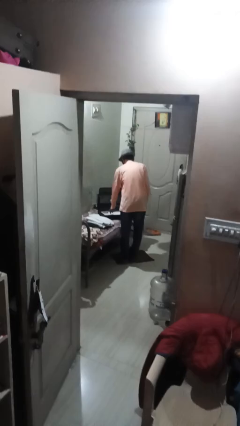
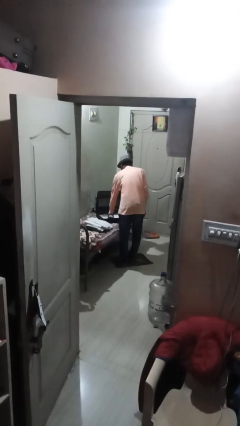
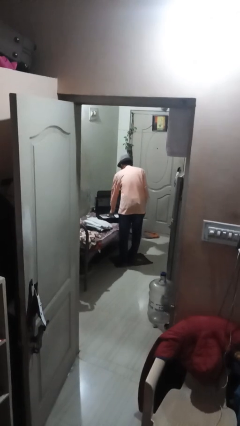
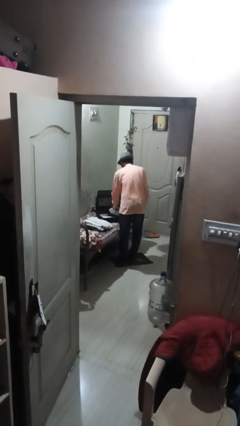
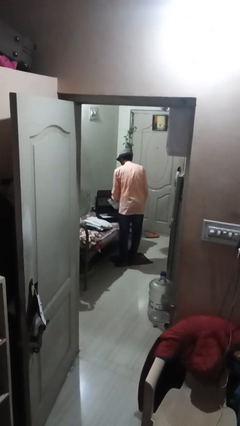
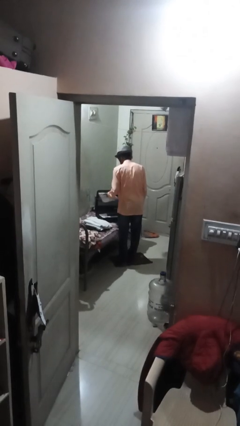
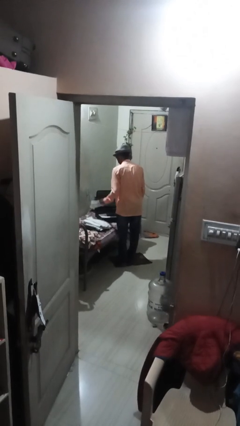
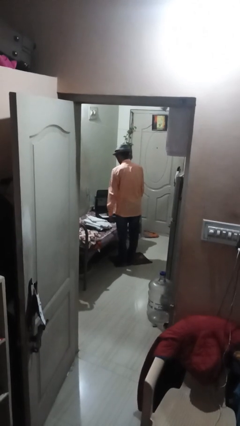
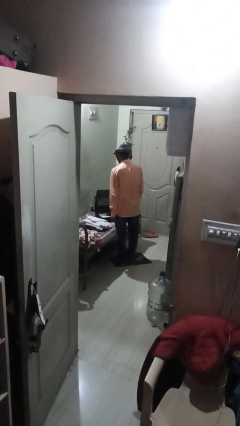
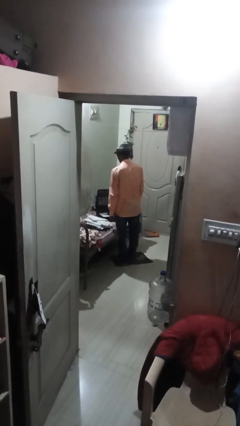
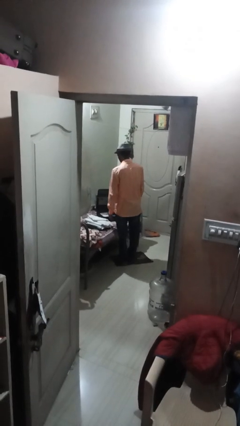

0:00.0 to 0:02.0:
person unloads clothes from suitcase

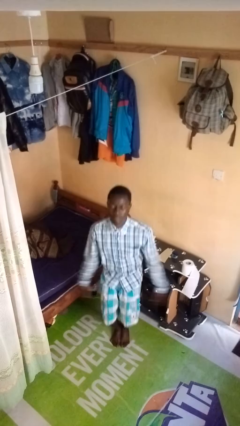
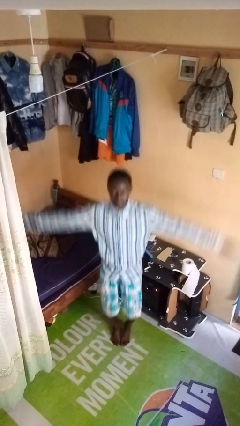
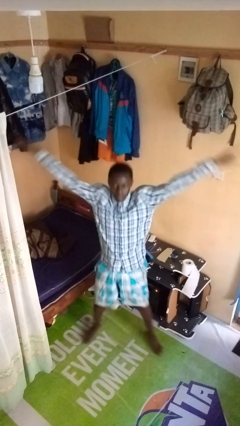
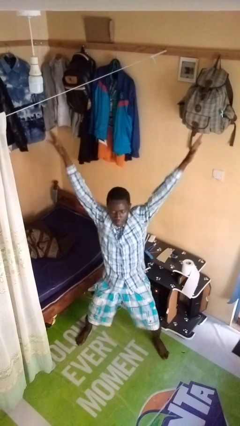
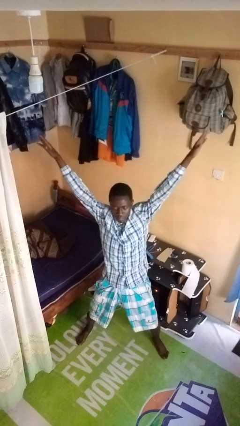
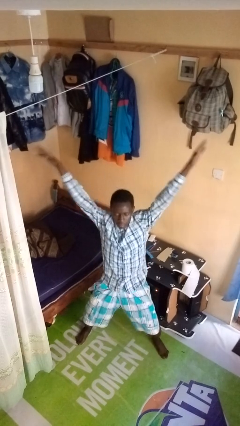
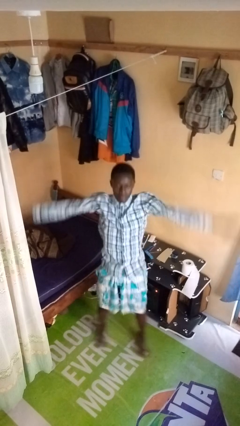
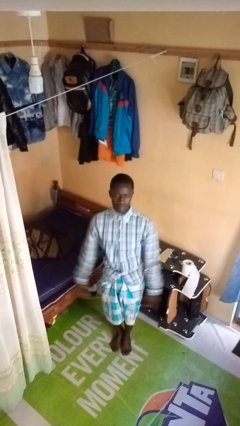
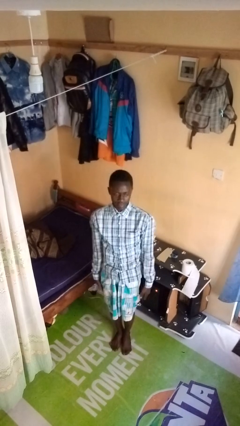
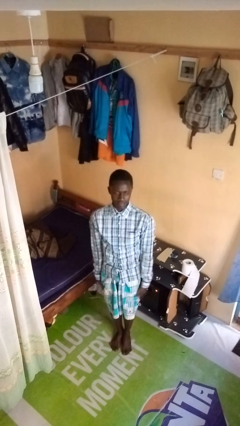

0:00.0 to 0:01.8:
person exercises with jumping jacks

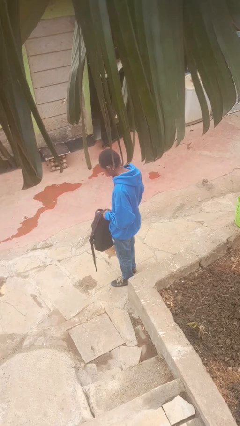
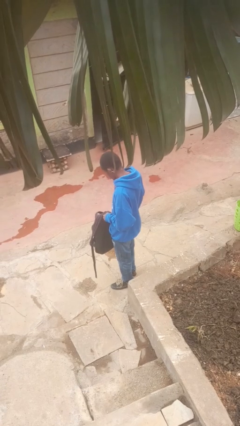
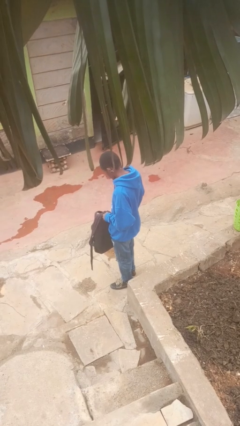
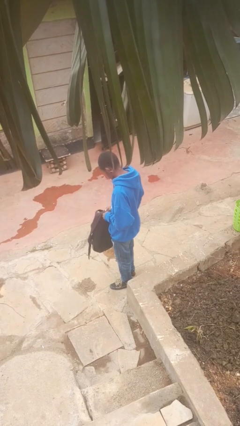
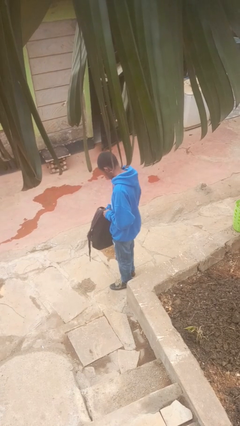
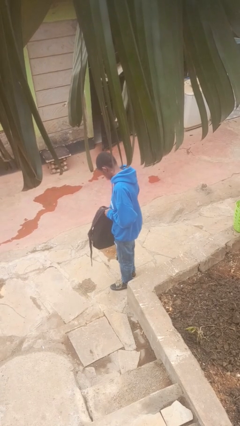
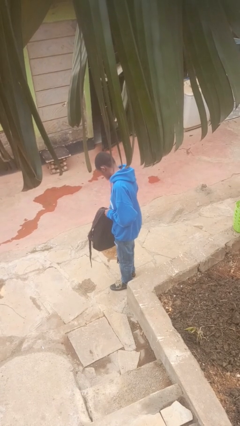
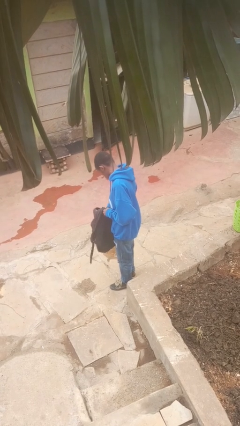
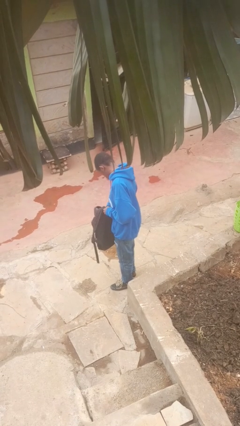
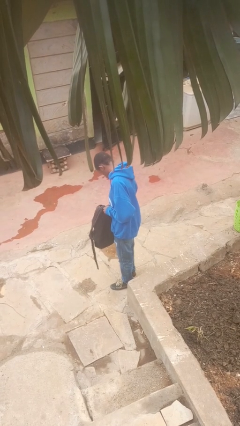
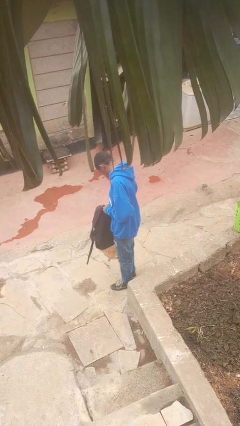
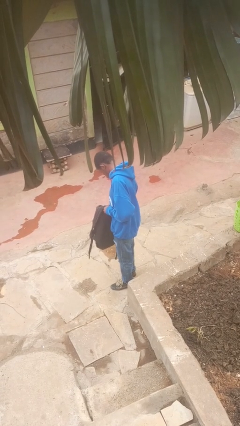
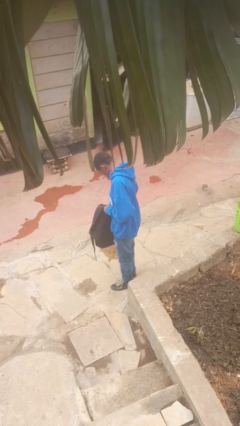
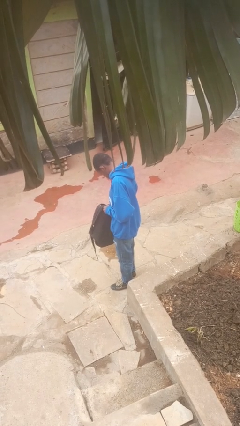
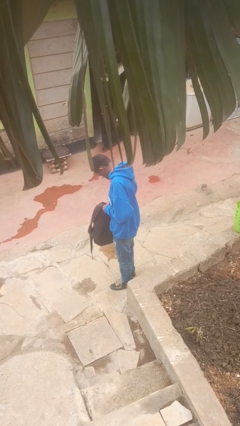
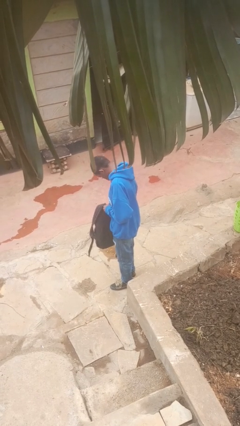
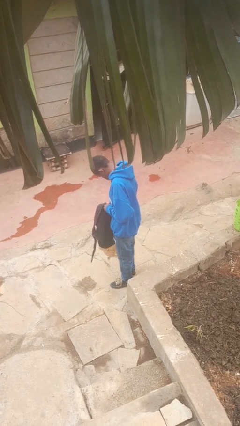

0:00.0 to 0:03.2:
person searches in backpack

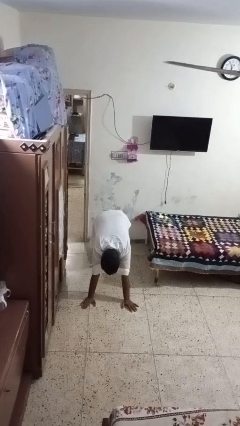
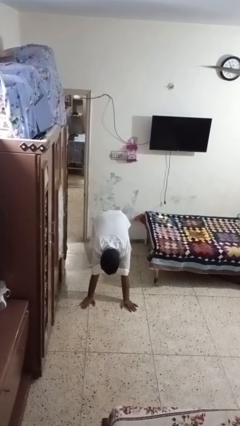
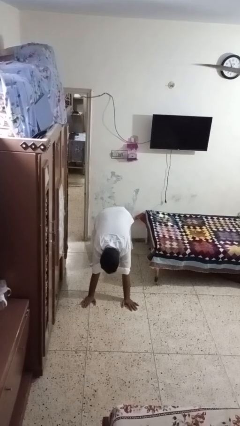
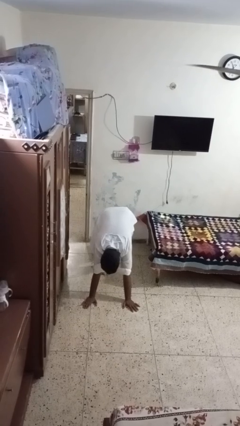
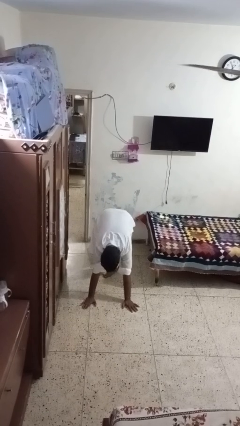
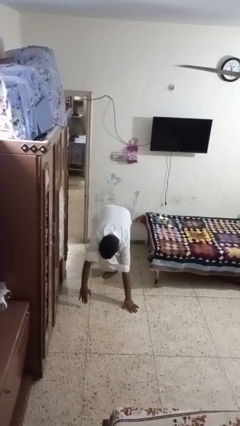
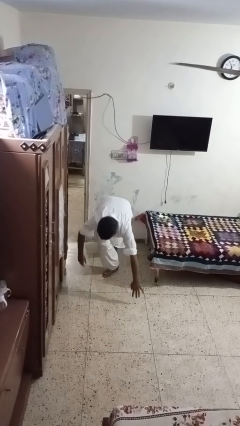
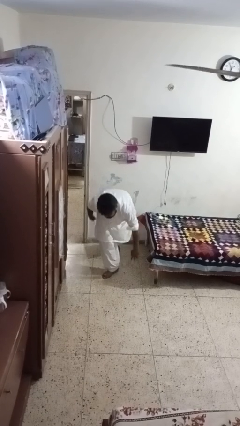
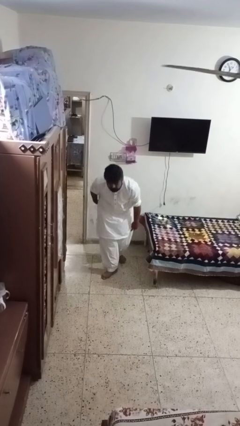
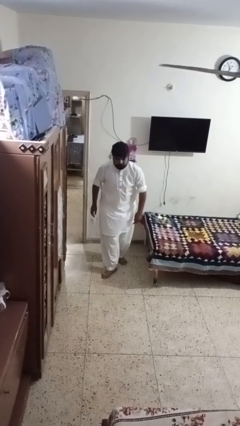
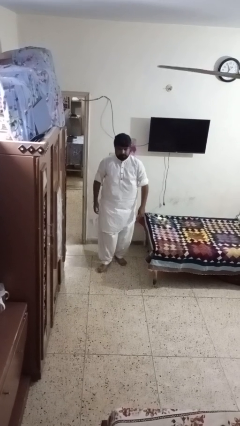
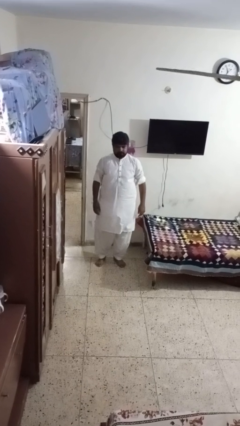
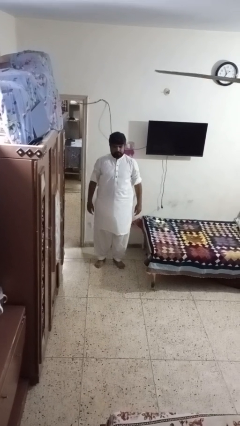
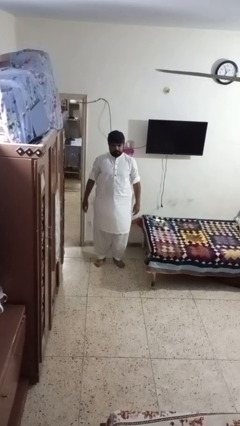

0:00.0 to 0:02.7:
person stands up from floor

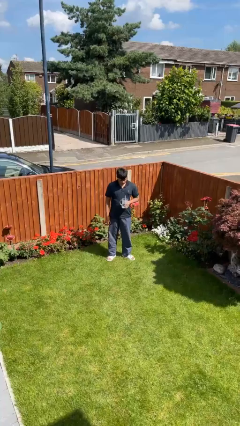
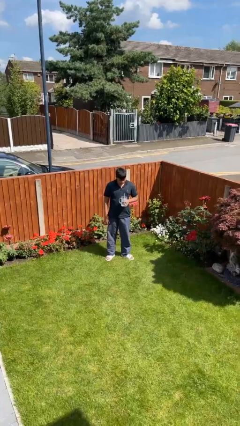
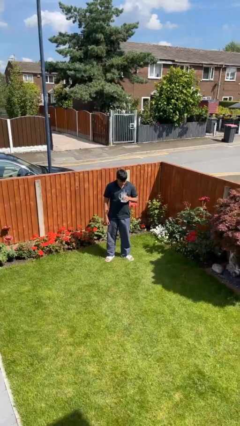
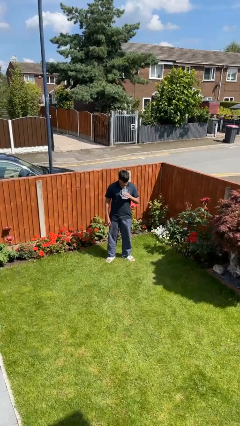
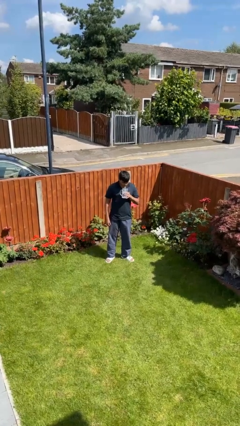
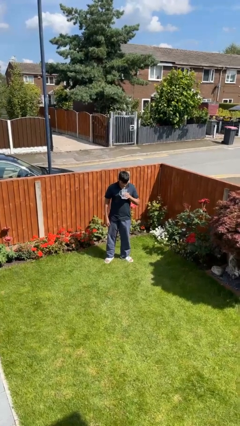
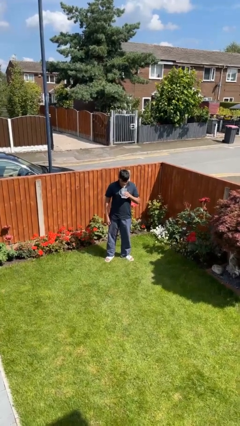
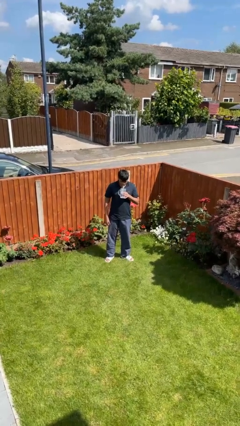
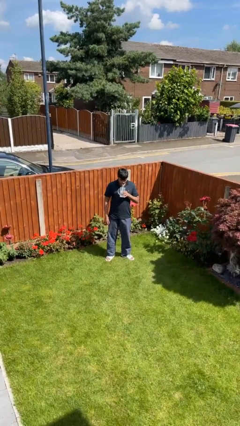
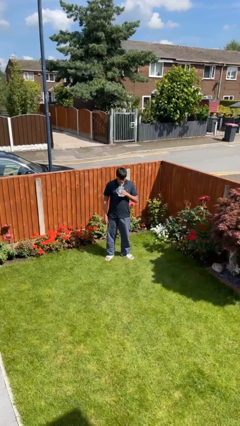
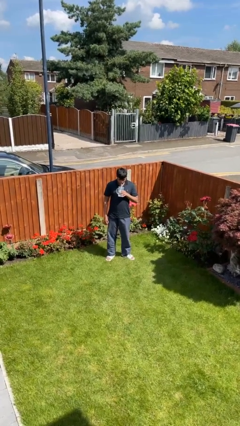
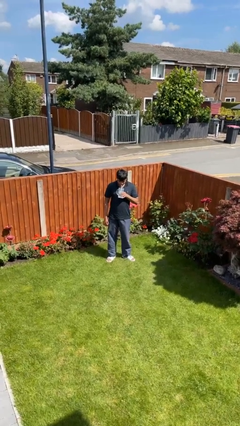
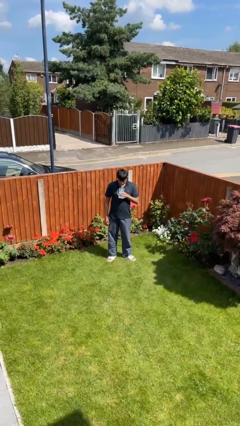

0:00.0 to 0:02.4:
person drinks from straw

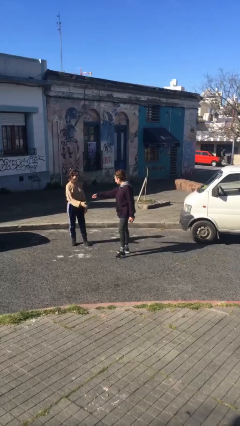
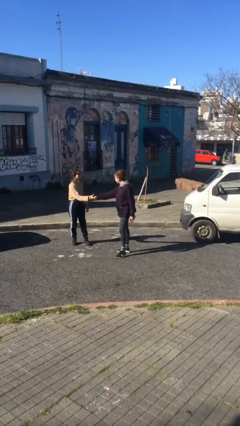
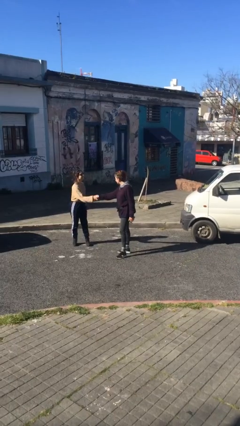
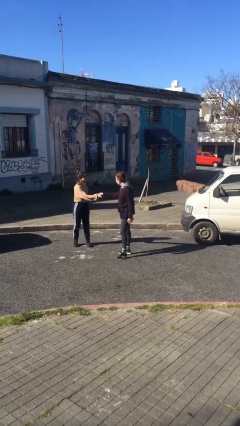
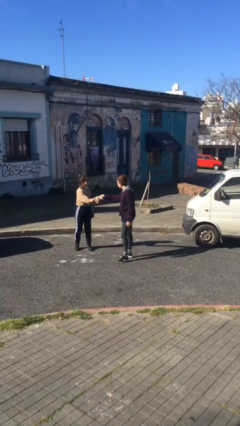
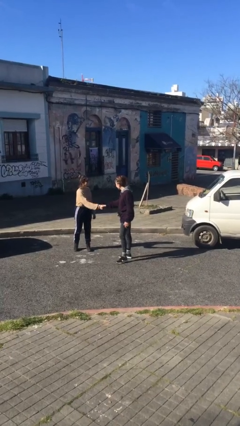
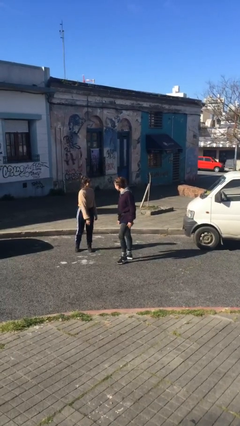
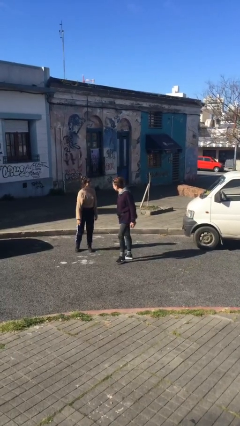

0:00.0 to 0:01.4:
person shakes hand

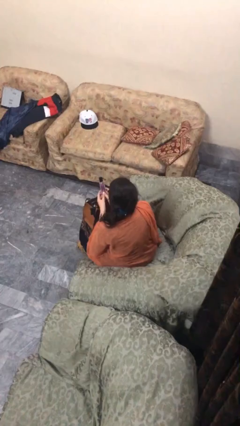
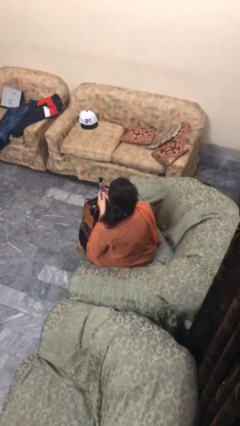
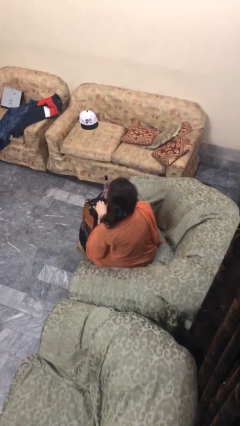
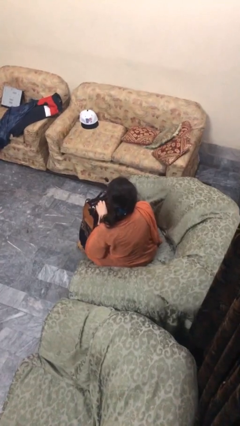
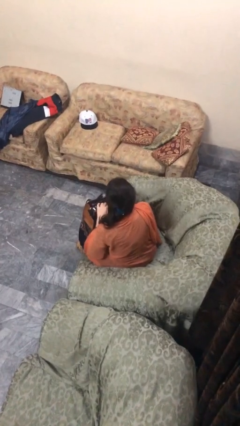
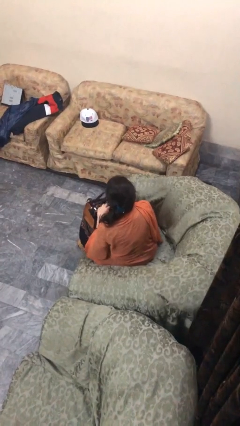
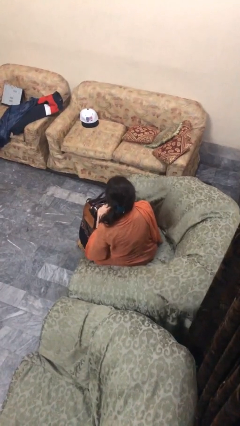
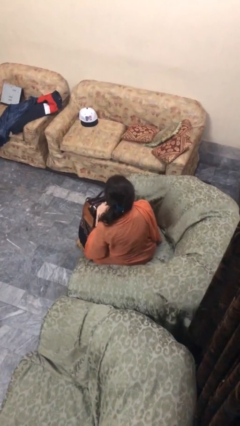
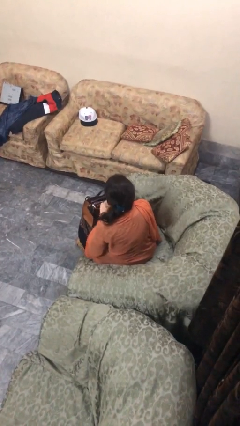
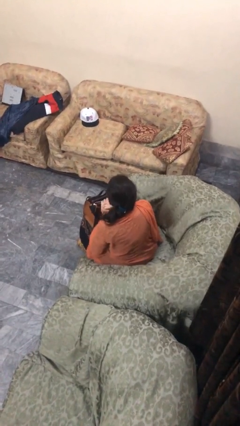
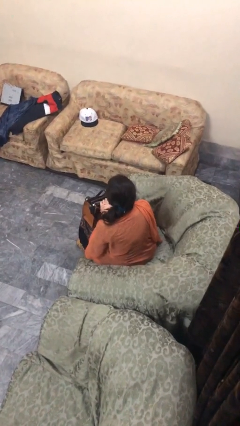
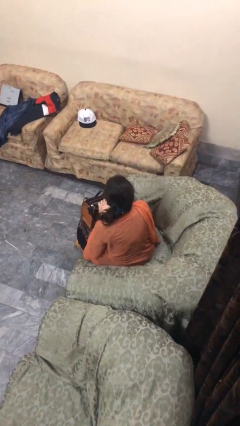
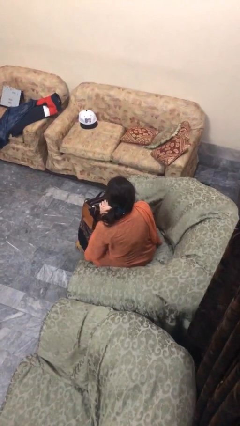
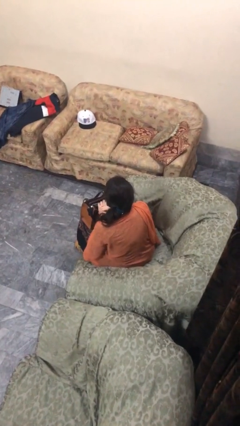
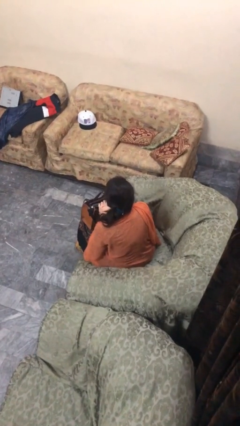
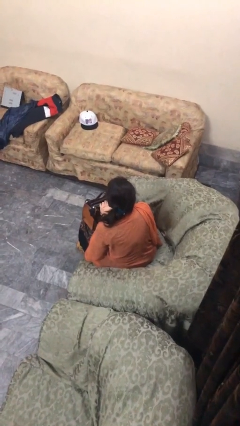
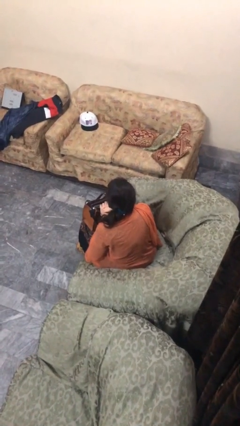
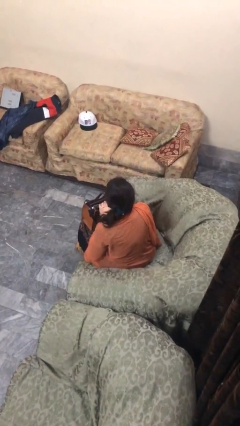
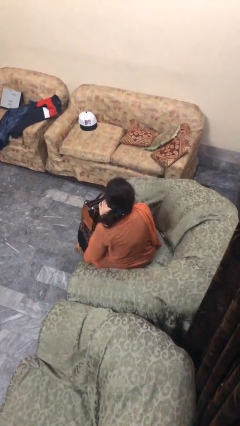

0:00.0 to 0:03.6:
person puts object into purse
